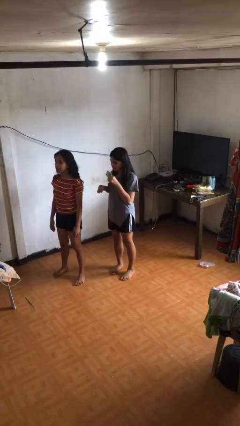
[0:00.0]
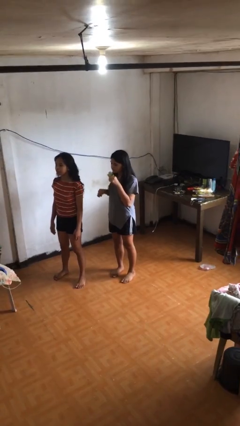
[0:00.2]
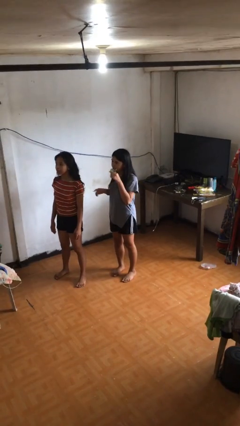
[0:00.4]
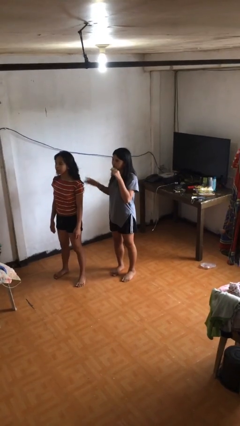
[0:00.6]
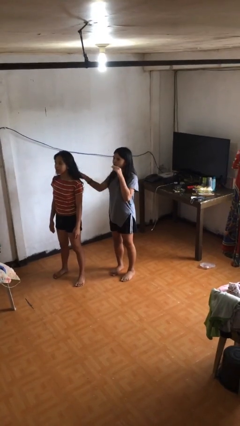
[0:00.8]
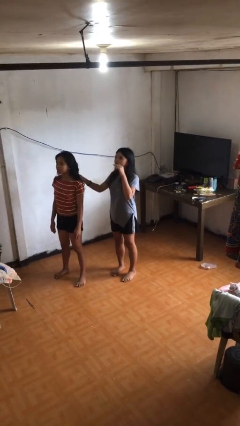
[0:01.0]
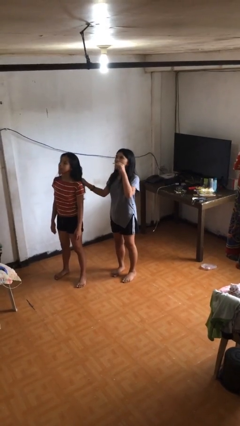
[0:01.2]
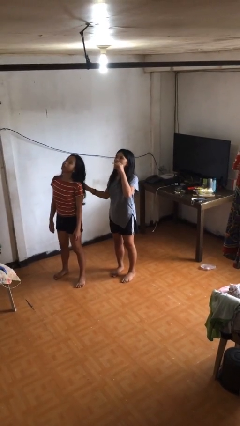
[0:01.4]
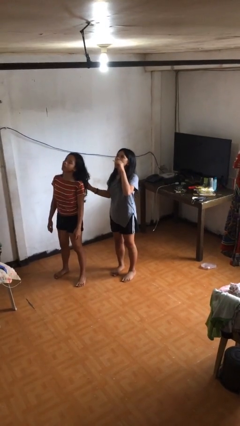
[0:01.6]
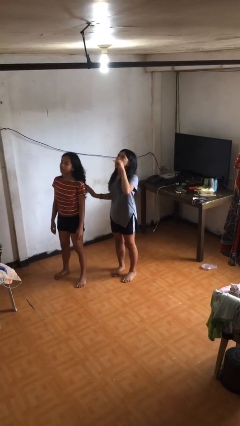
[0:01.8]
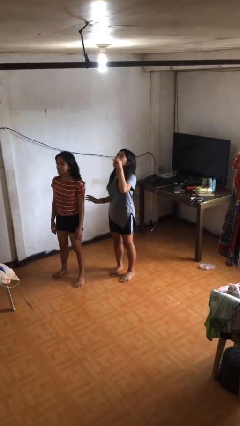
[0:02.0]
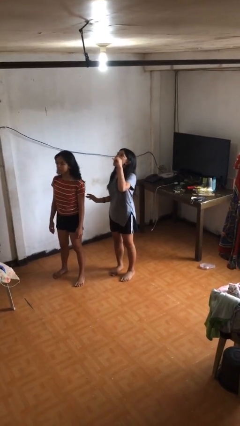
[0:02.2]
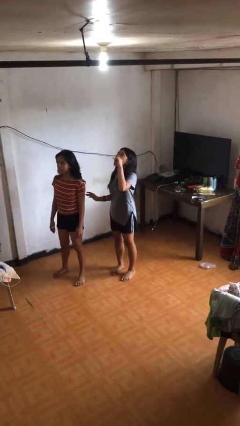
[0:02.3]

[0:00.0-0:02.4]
person grabs person by hair

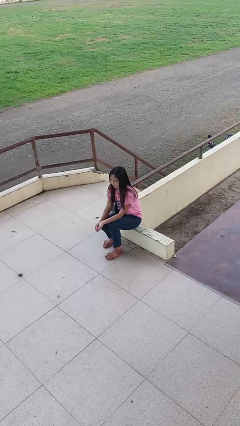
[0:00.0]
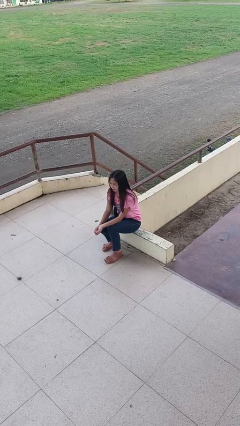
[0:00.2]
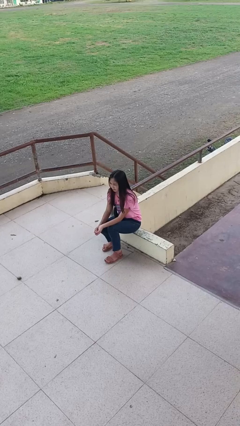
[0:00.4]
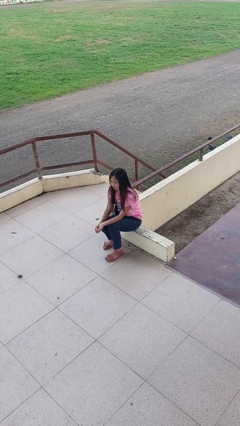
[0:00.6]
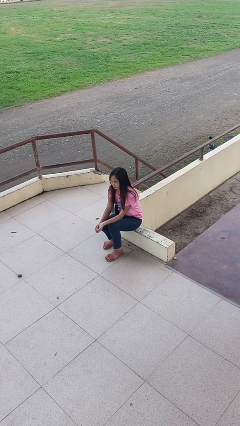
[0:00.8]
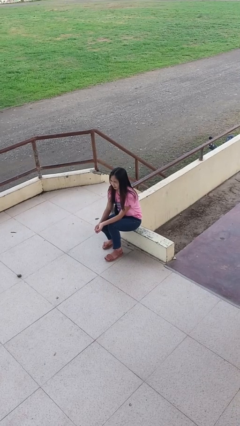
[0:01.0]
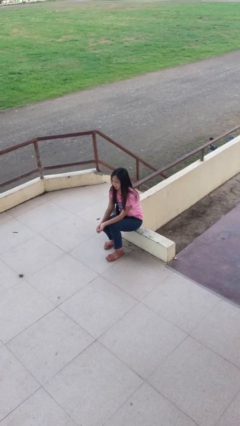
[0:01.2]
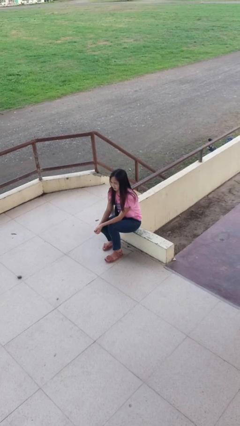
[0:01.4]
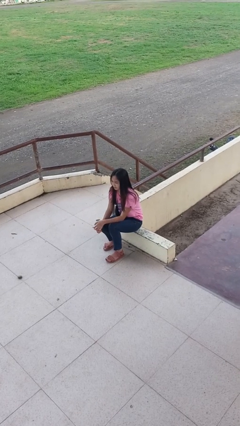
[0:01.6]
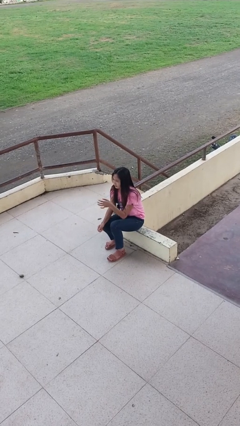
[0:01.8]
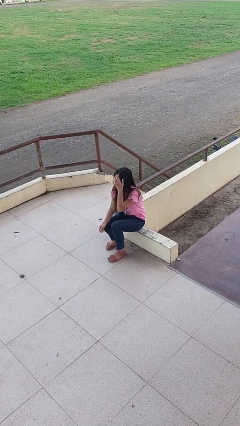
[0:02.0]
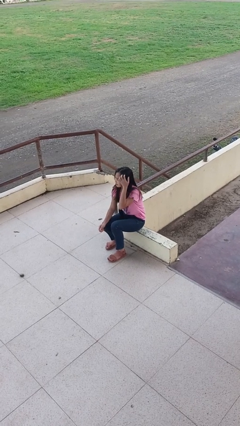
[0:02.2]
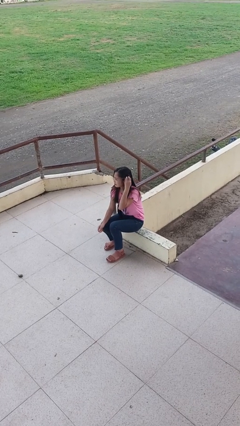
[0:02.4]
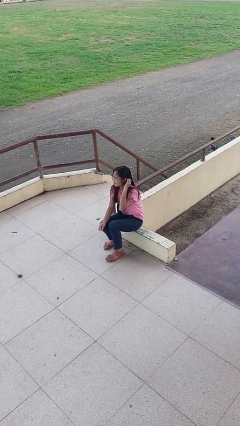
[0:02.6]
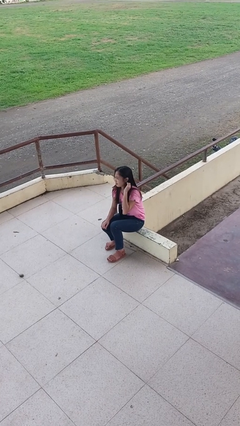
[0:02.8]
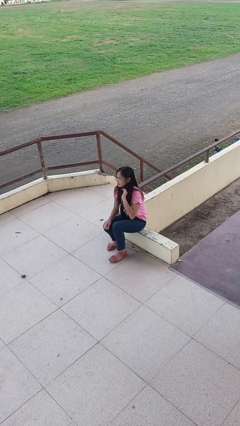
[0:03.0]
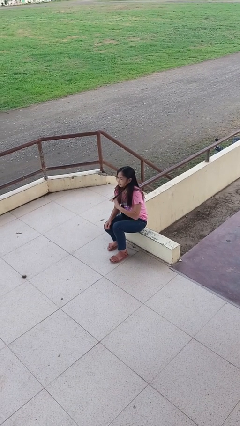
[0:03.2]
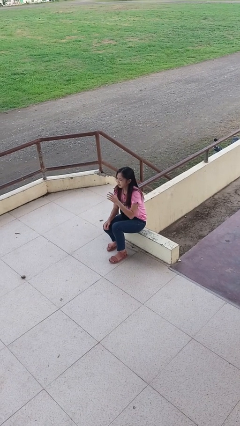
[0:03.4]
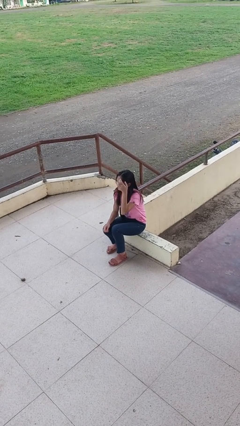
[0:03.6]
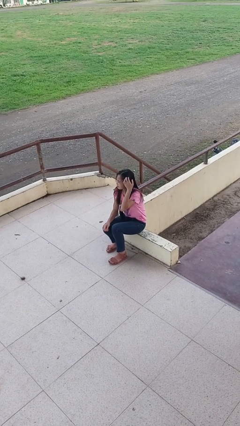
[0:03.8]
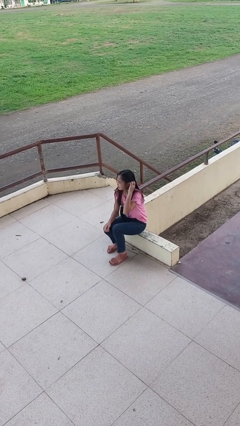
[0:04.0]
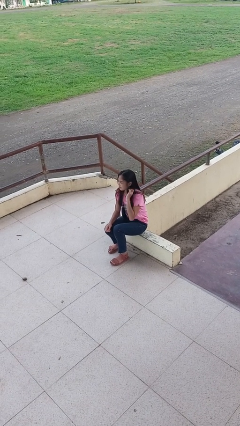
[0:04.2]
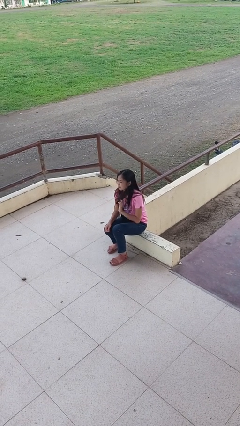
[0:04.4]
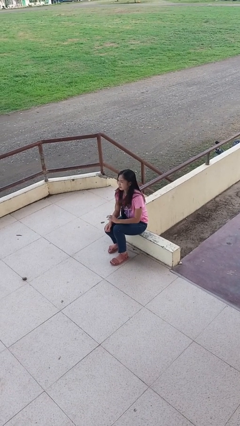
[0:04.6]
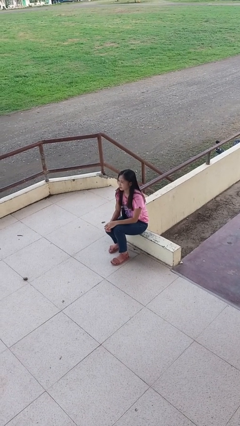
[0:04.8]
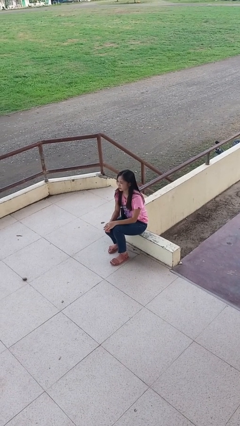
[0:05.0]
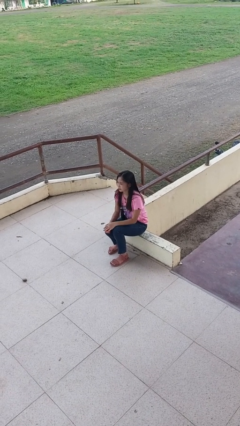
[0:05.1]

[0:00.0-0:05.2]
person strokes hair

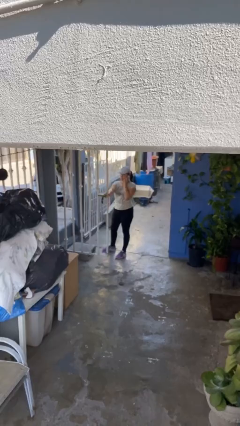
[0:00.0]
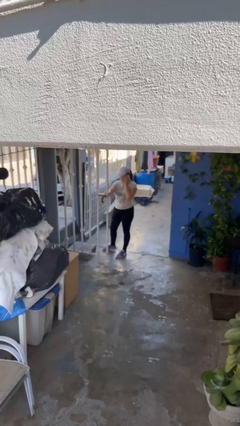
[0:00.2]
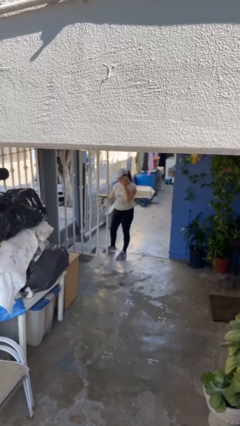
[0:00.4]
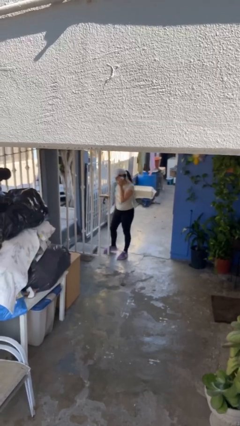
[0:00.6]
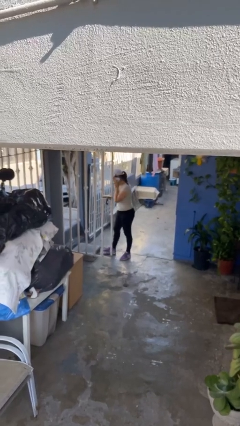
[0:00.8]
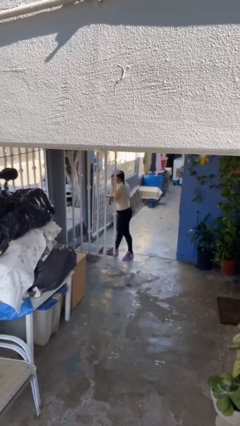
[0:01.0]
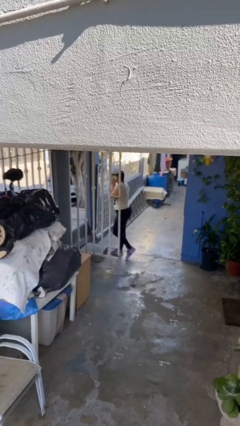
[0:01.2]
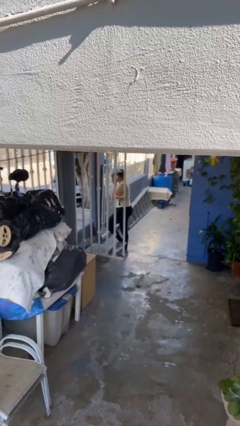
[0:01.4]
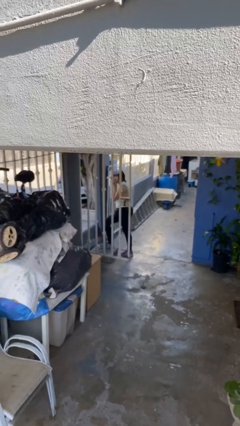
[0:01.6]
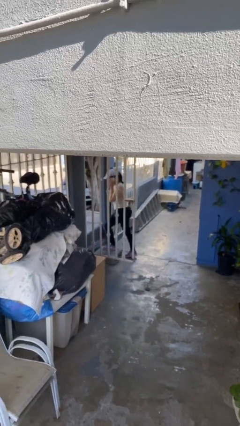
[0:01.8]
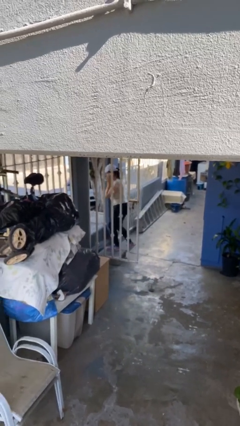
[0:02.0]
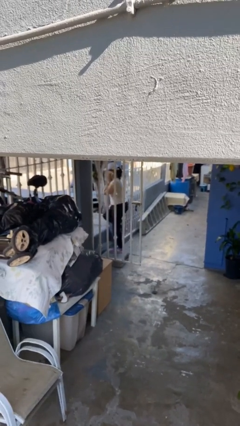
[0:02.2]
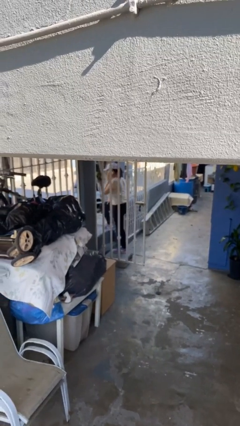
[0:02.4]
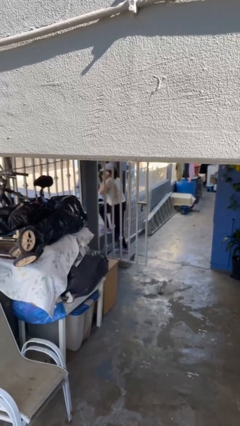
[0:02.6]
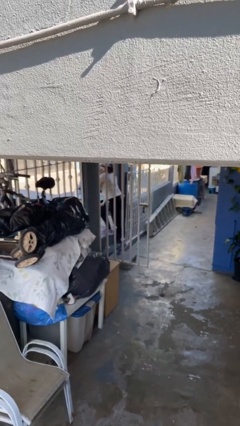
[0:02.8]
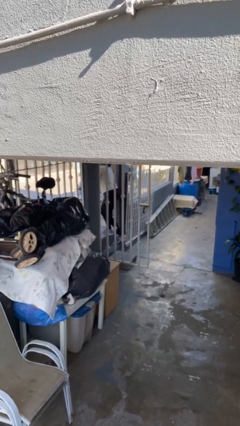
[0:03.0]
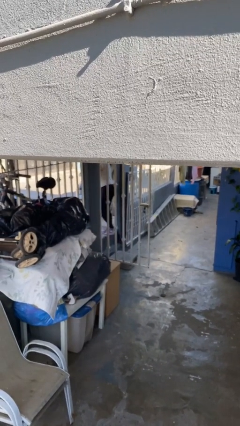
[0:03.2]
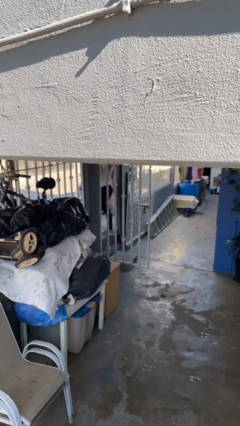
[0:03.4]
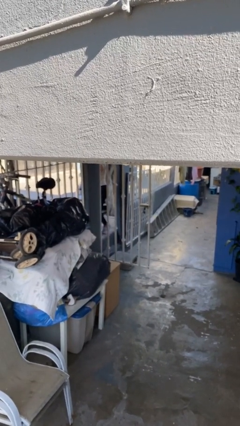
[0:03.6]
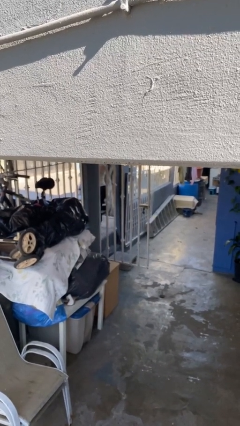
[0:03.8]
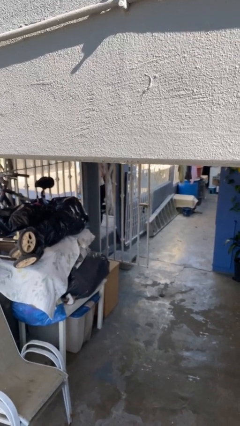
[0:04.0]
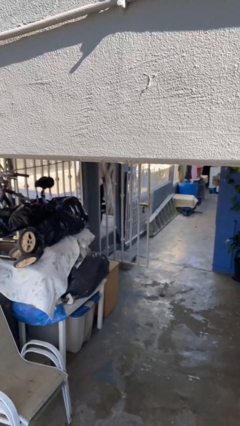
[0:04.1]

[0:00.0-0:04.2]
person exits scene through structure

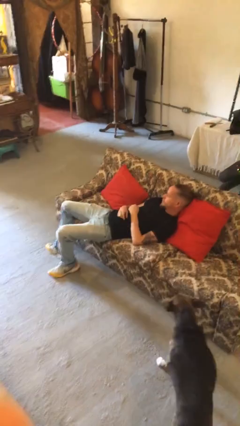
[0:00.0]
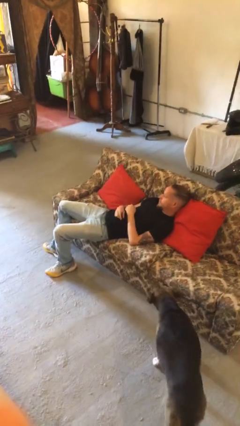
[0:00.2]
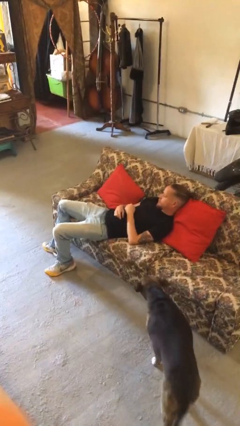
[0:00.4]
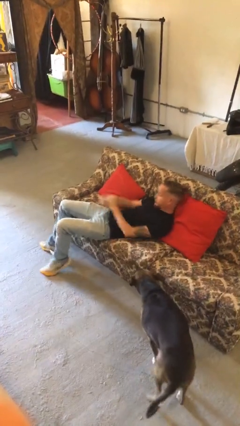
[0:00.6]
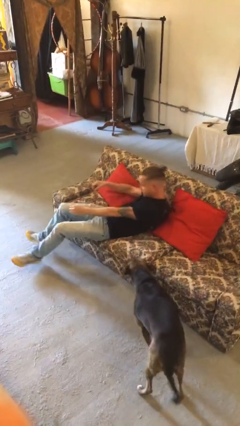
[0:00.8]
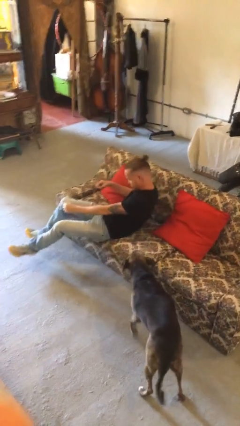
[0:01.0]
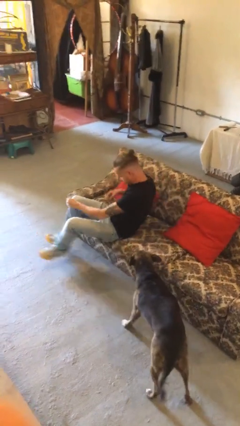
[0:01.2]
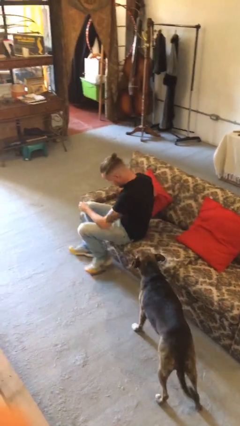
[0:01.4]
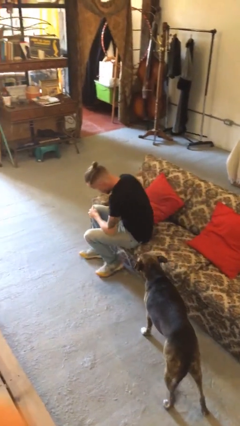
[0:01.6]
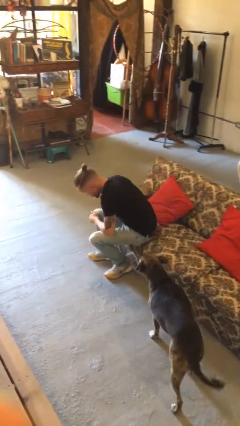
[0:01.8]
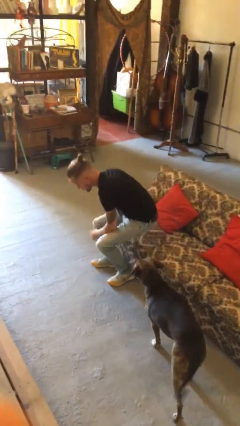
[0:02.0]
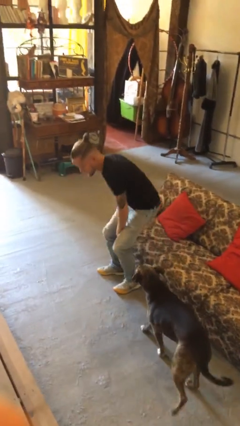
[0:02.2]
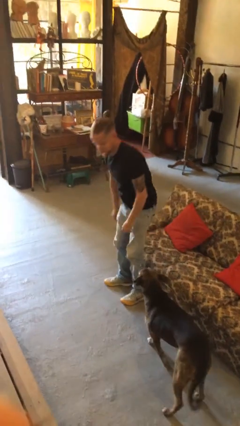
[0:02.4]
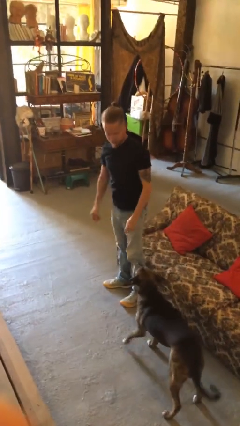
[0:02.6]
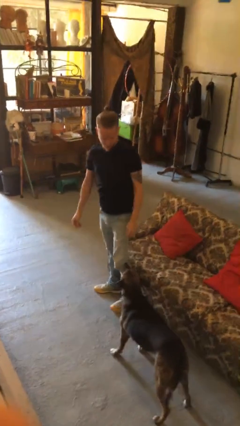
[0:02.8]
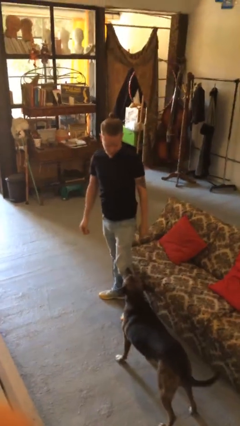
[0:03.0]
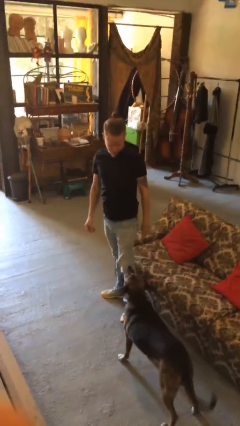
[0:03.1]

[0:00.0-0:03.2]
person stands up

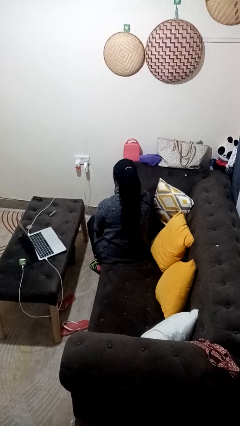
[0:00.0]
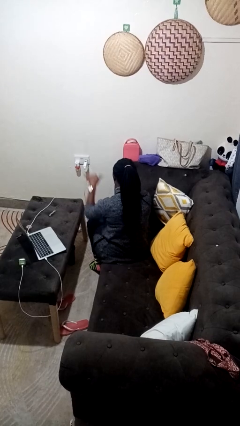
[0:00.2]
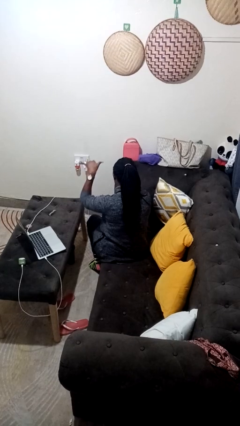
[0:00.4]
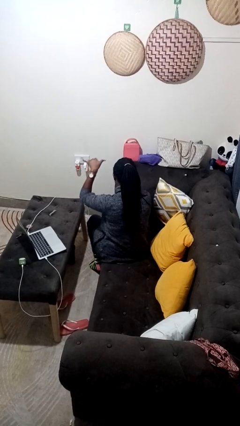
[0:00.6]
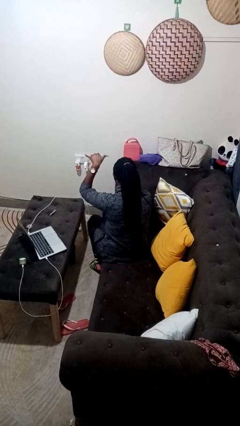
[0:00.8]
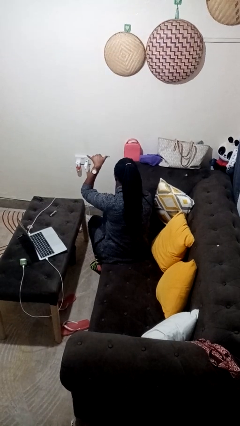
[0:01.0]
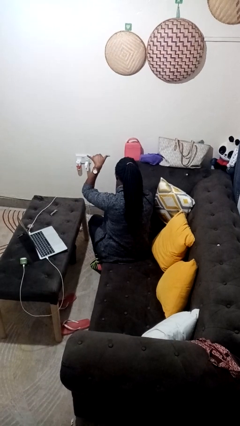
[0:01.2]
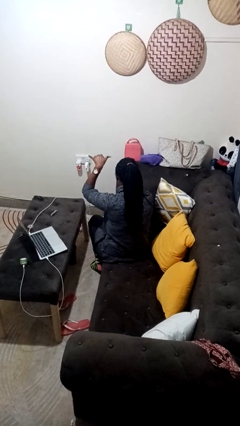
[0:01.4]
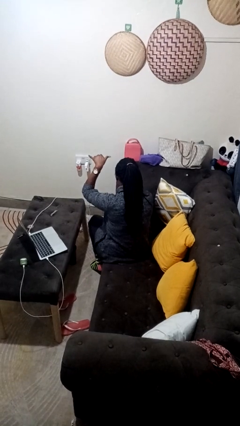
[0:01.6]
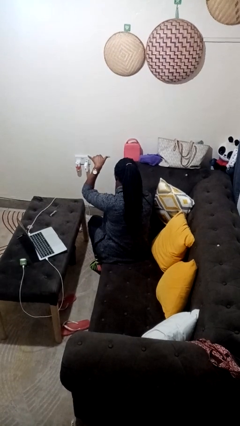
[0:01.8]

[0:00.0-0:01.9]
person gestures hang loose

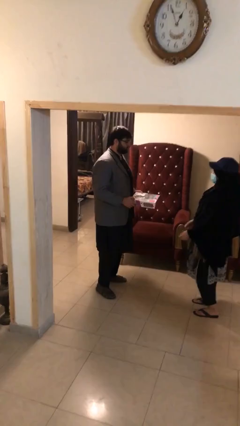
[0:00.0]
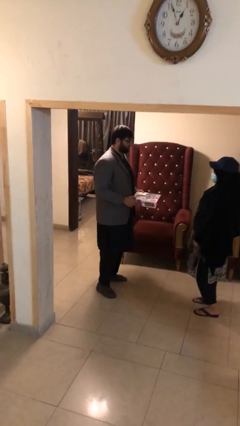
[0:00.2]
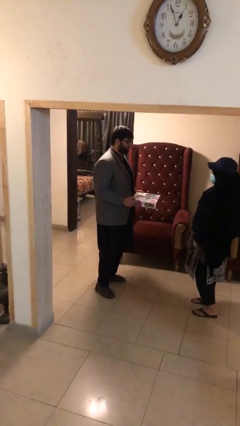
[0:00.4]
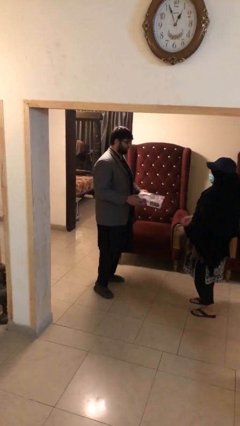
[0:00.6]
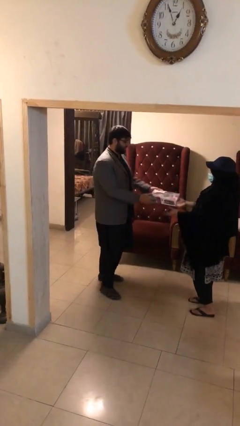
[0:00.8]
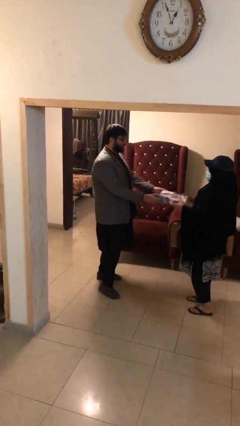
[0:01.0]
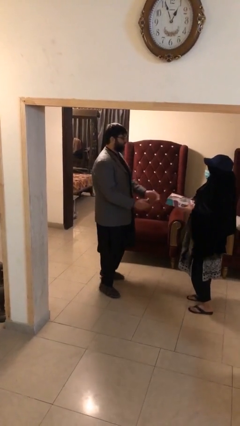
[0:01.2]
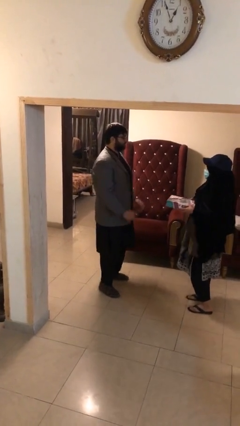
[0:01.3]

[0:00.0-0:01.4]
person transfers object to person
